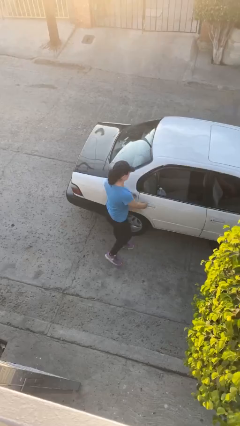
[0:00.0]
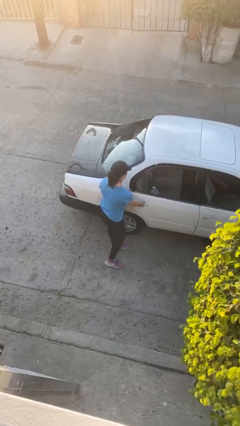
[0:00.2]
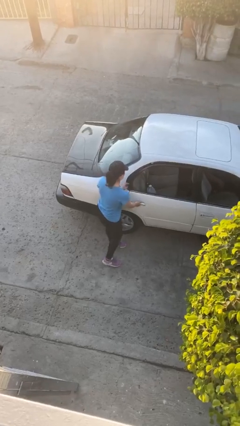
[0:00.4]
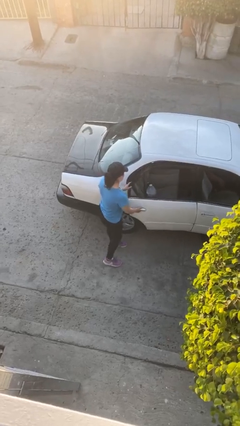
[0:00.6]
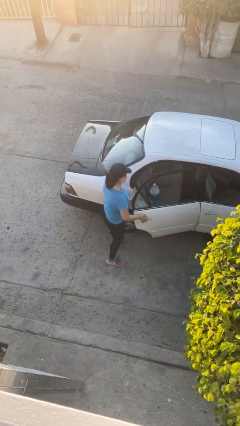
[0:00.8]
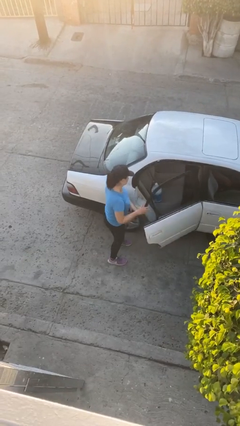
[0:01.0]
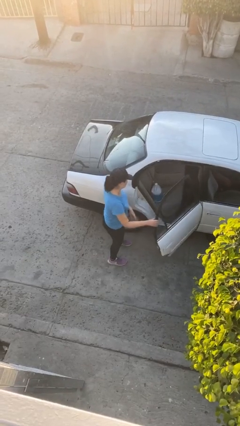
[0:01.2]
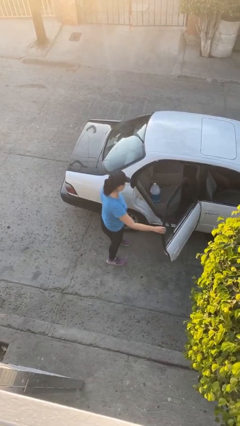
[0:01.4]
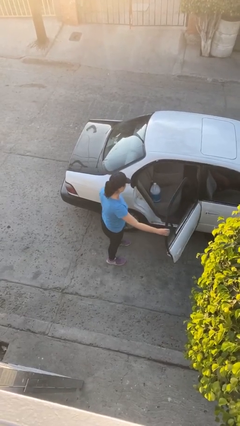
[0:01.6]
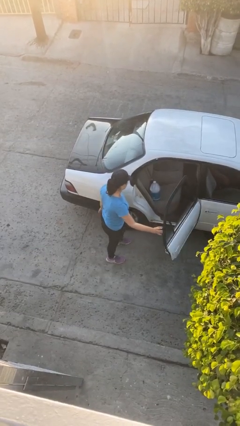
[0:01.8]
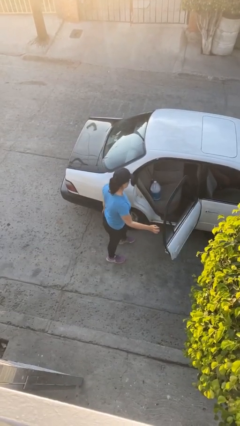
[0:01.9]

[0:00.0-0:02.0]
person opens car door

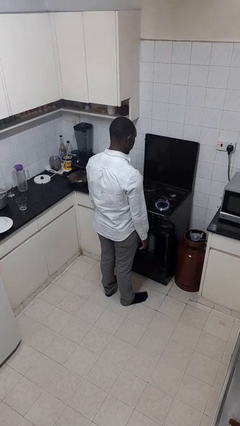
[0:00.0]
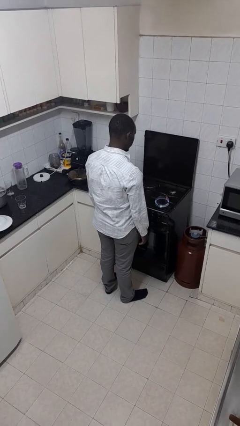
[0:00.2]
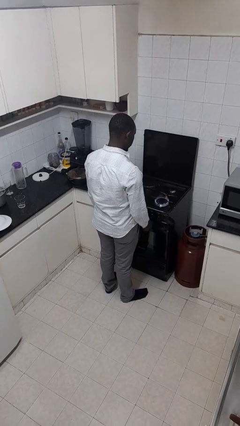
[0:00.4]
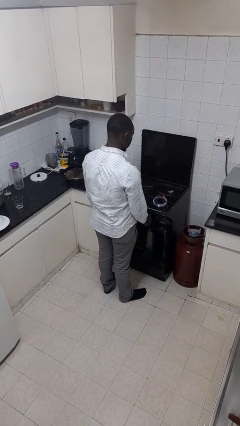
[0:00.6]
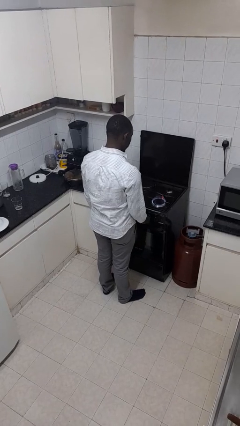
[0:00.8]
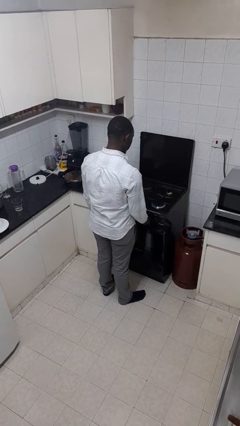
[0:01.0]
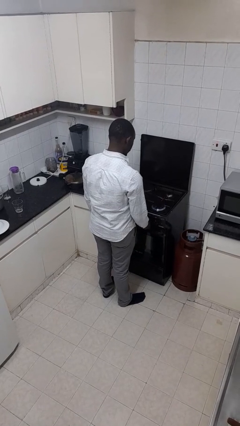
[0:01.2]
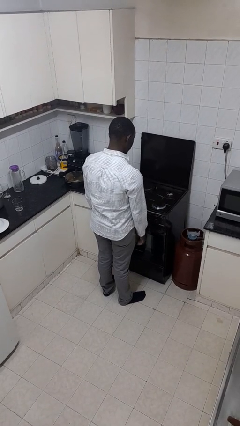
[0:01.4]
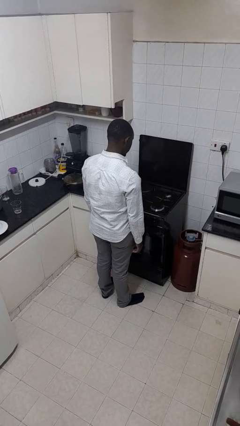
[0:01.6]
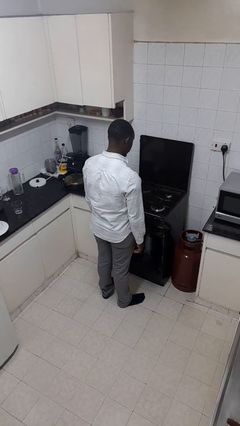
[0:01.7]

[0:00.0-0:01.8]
person turns off stovetop

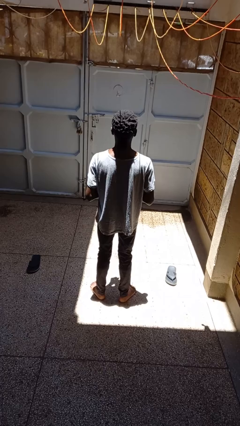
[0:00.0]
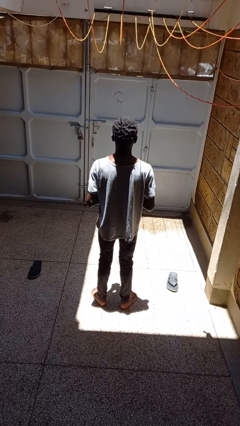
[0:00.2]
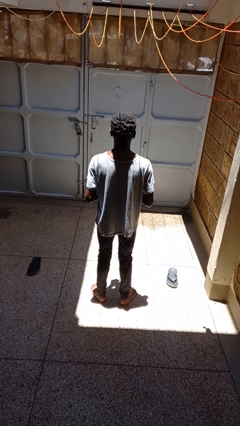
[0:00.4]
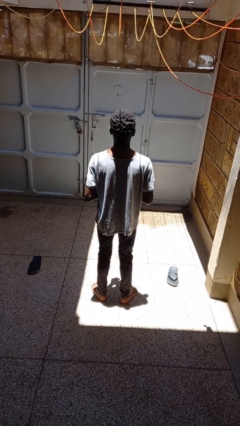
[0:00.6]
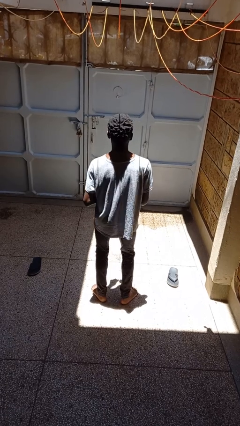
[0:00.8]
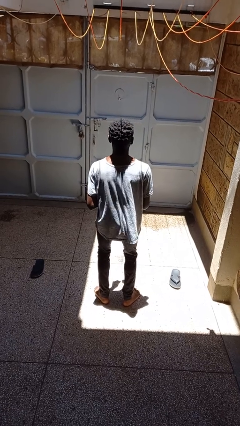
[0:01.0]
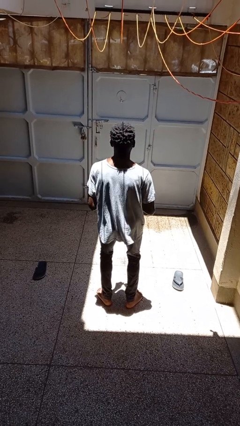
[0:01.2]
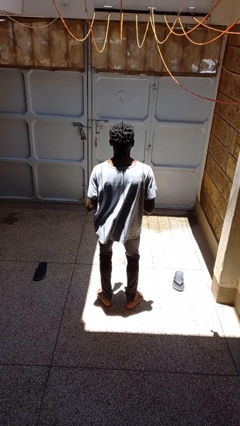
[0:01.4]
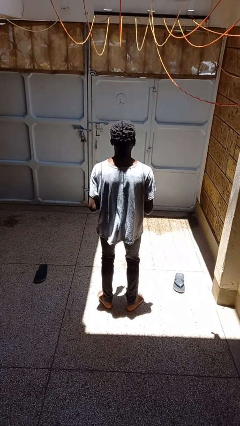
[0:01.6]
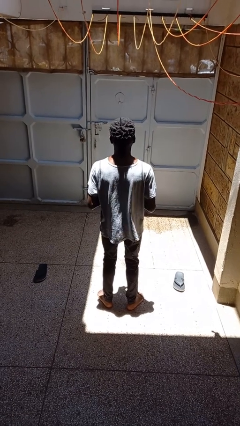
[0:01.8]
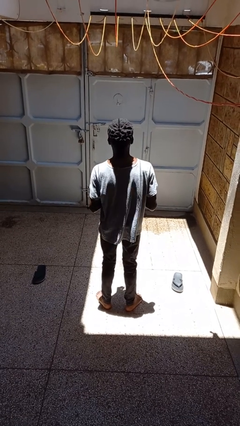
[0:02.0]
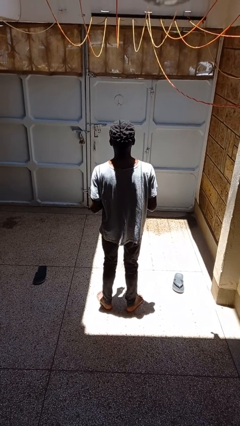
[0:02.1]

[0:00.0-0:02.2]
person dances in place

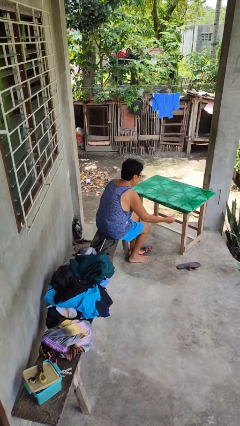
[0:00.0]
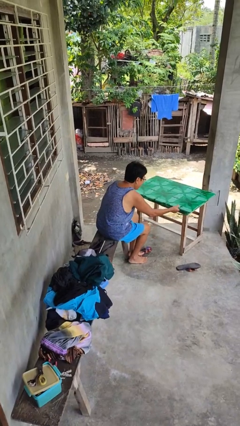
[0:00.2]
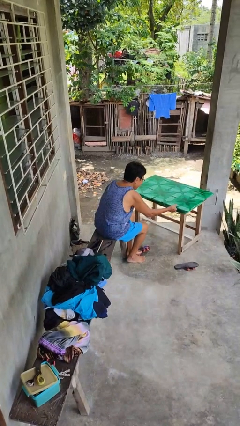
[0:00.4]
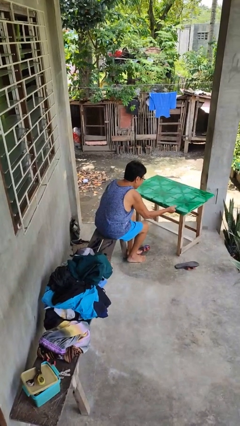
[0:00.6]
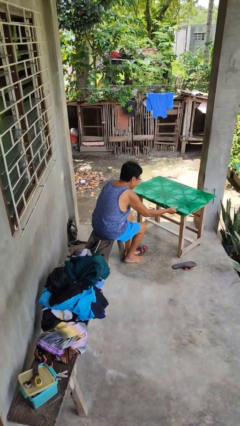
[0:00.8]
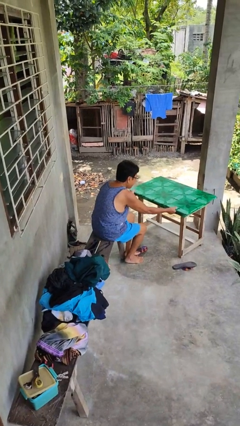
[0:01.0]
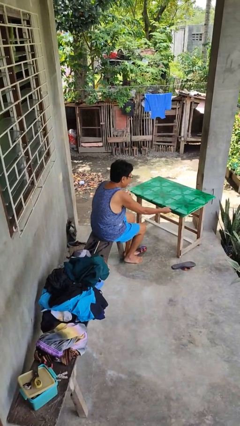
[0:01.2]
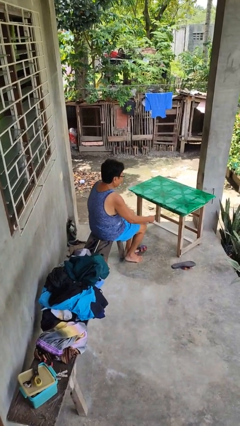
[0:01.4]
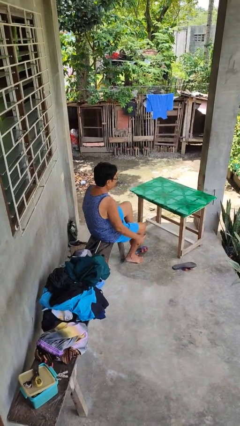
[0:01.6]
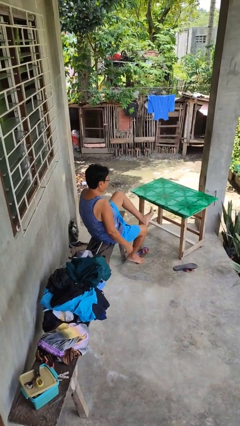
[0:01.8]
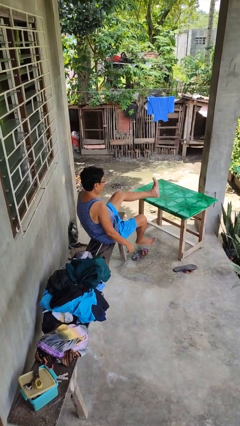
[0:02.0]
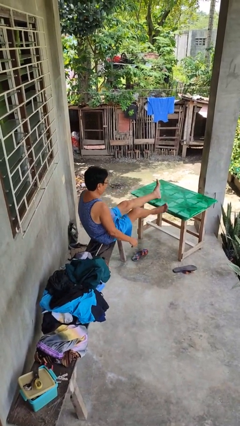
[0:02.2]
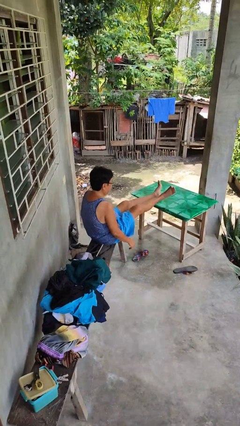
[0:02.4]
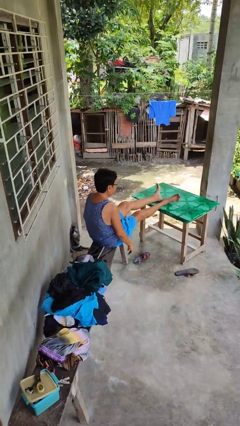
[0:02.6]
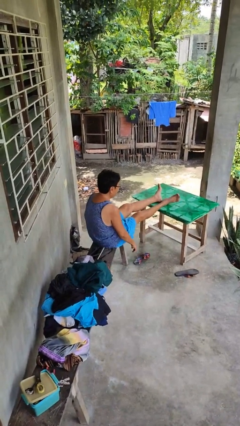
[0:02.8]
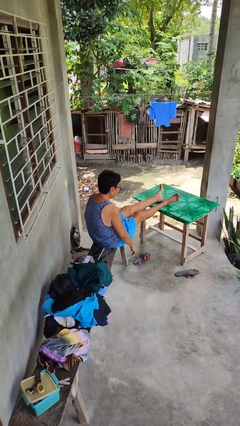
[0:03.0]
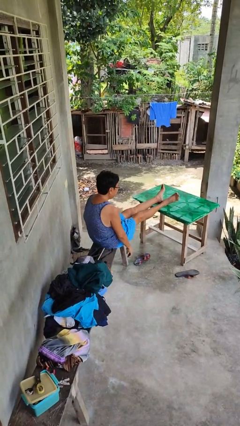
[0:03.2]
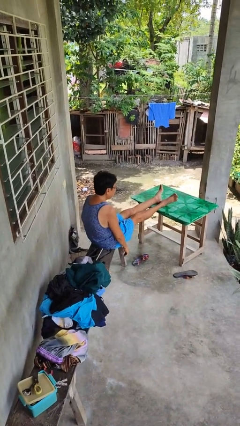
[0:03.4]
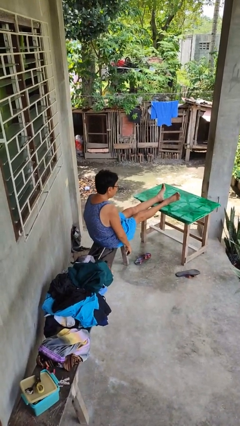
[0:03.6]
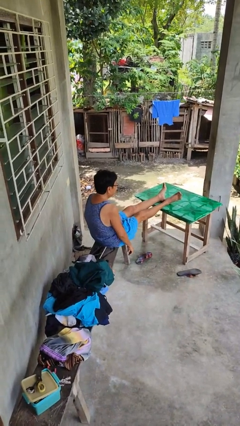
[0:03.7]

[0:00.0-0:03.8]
person puts feet up

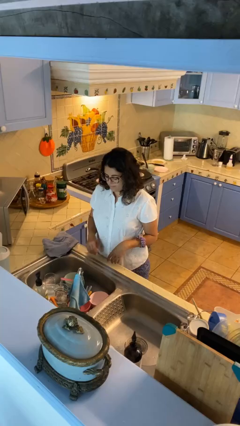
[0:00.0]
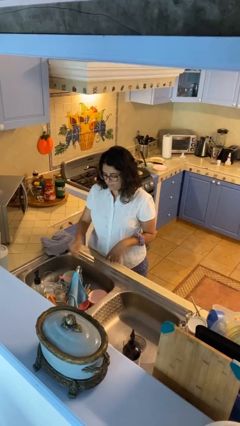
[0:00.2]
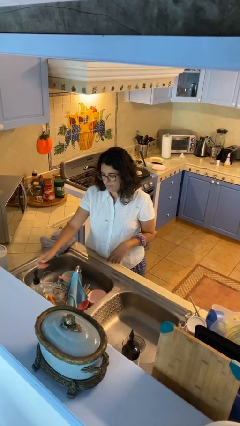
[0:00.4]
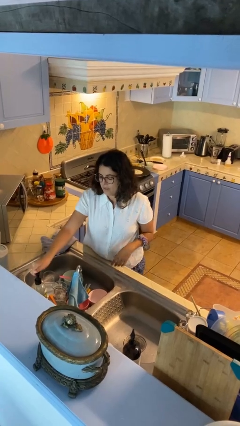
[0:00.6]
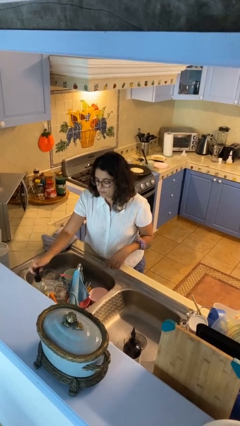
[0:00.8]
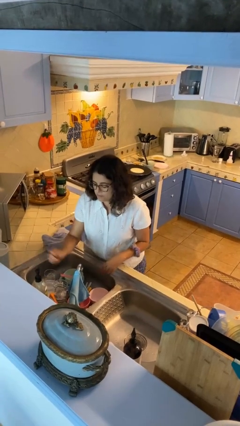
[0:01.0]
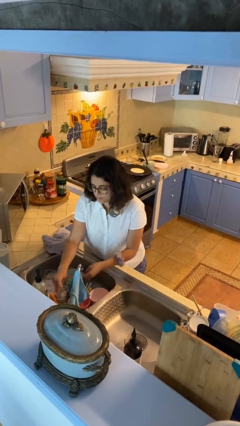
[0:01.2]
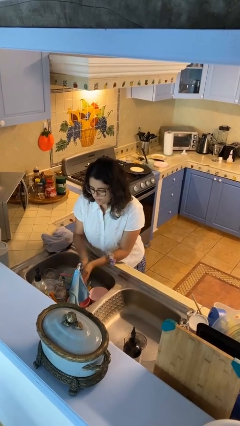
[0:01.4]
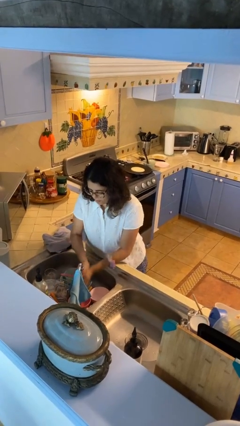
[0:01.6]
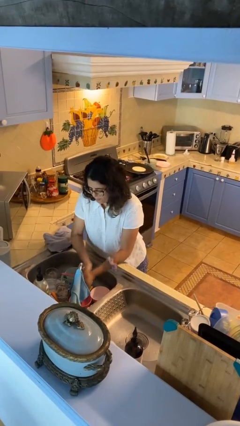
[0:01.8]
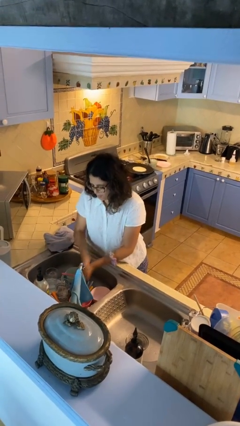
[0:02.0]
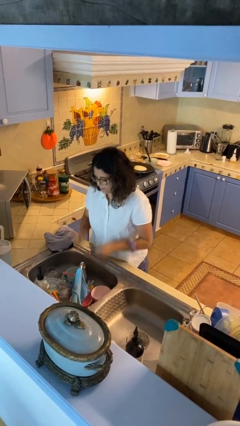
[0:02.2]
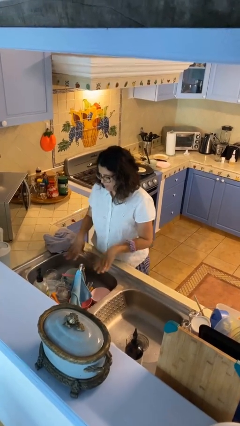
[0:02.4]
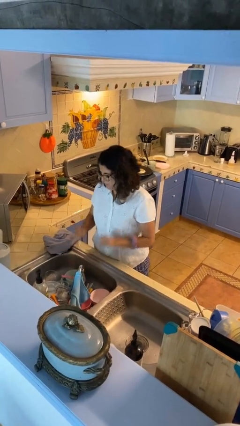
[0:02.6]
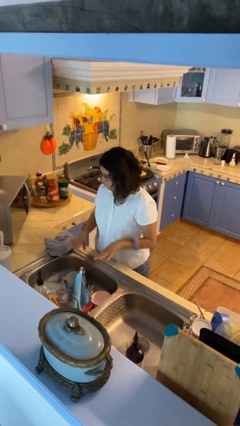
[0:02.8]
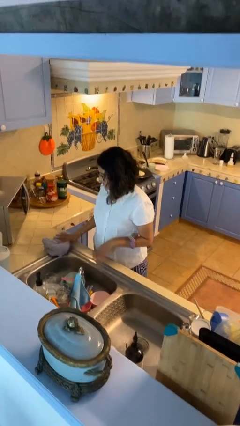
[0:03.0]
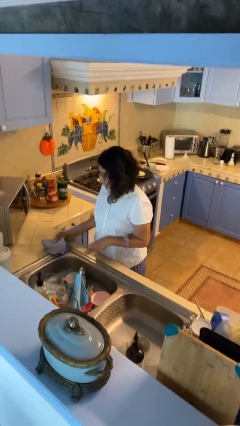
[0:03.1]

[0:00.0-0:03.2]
person washes hands

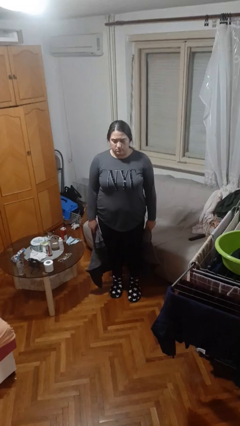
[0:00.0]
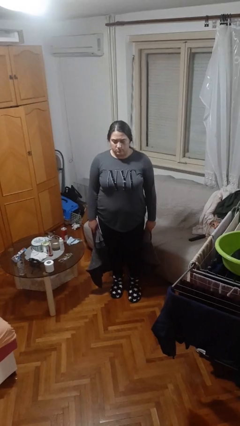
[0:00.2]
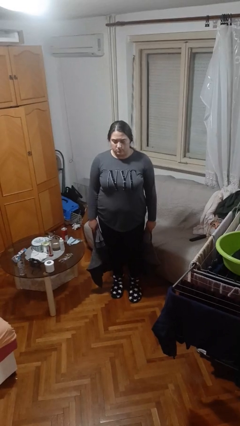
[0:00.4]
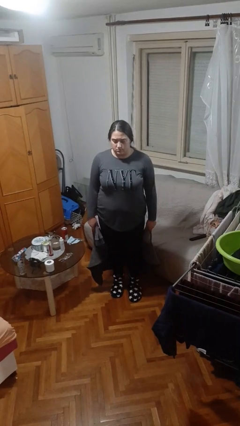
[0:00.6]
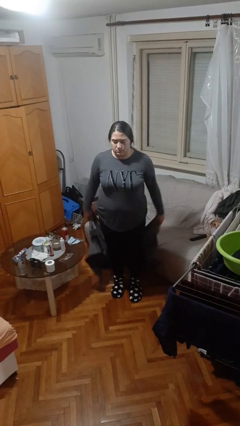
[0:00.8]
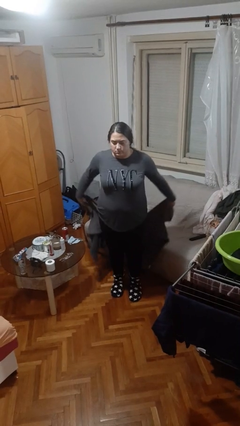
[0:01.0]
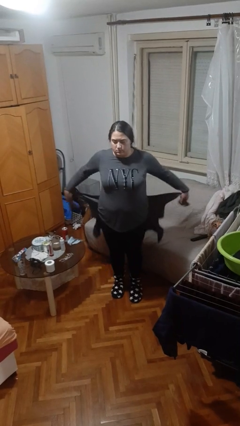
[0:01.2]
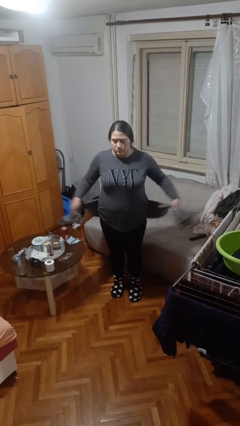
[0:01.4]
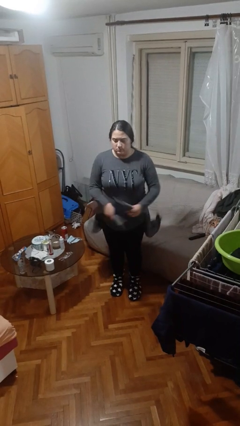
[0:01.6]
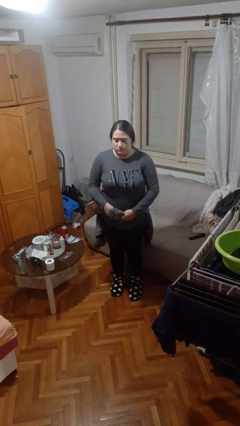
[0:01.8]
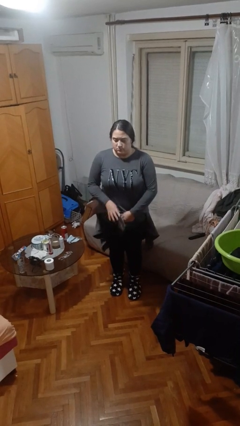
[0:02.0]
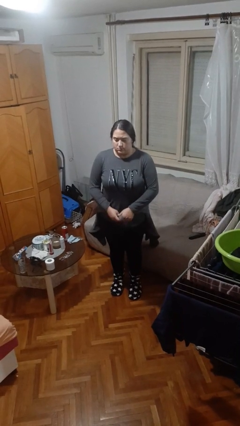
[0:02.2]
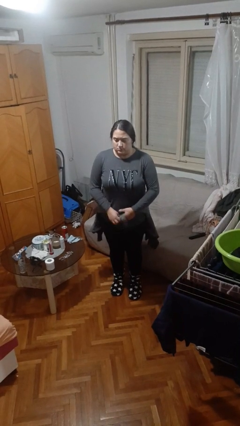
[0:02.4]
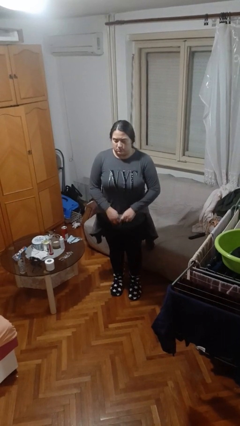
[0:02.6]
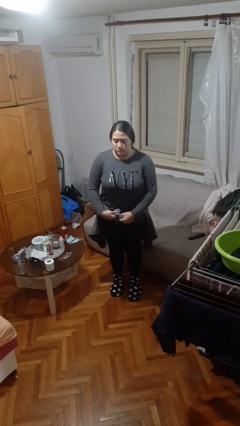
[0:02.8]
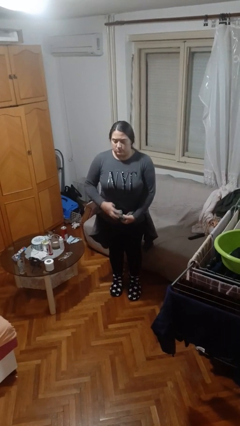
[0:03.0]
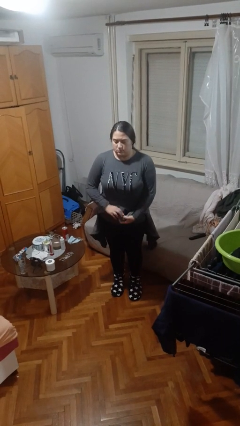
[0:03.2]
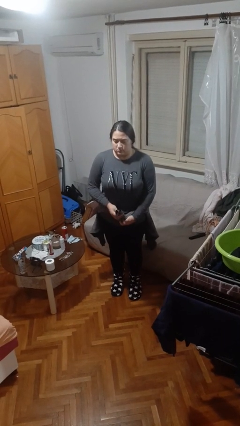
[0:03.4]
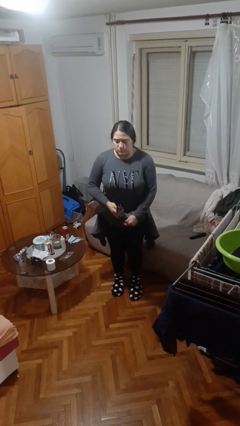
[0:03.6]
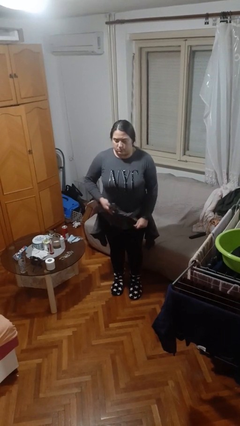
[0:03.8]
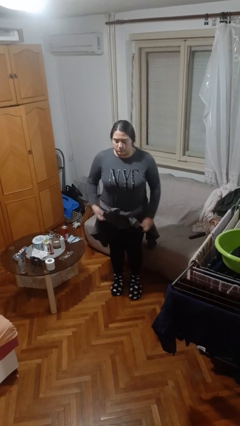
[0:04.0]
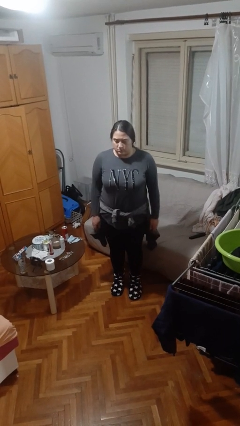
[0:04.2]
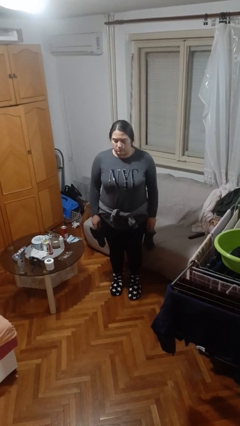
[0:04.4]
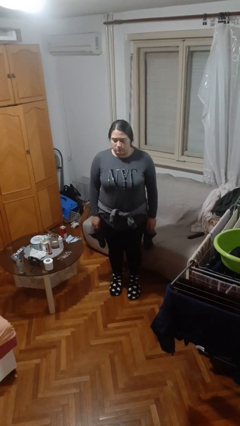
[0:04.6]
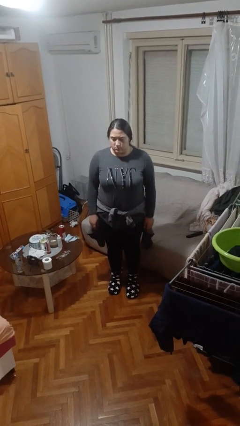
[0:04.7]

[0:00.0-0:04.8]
person ties jacket around waist
